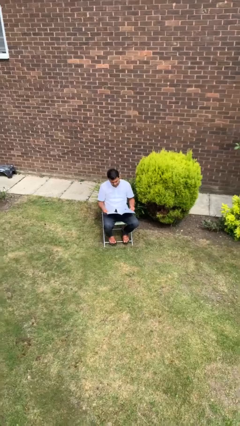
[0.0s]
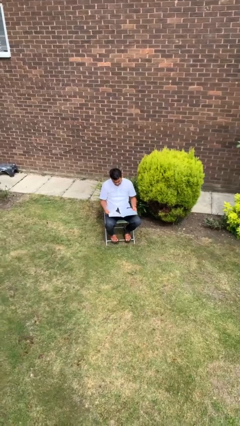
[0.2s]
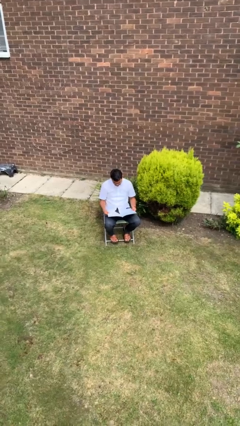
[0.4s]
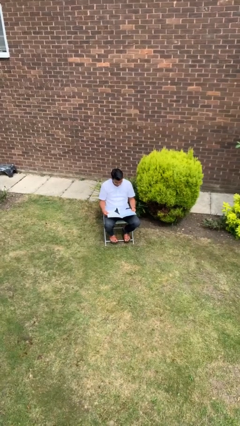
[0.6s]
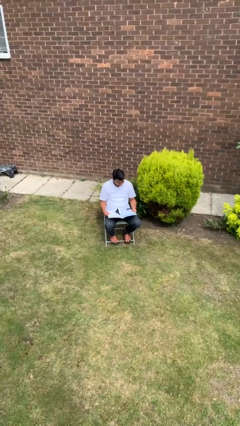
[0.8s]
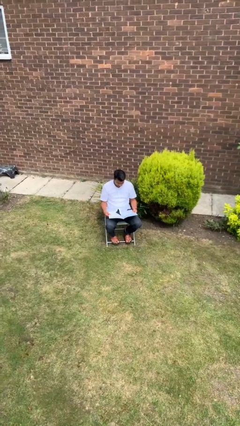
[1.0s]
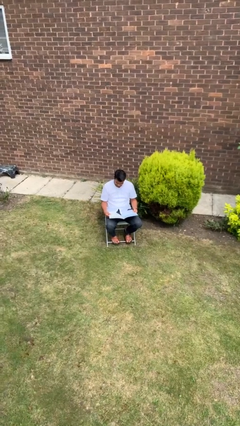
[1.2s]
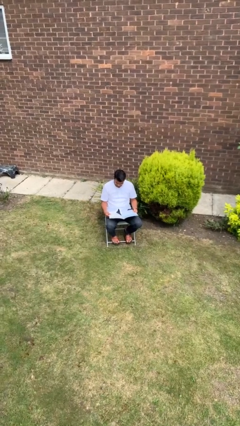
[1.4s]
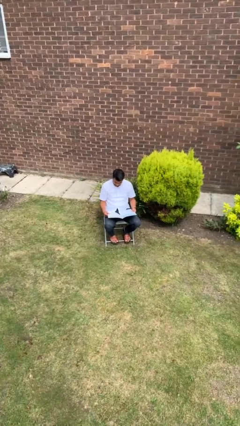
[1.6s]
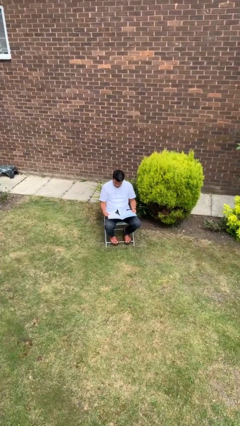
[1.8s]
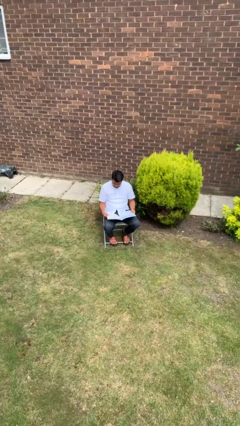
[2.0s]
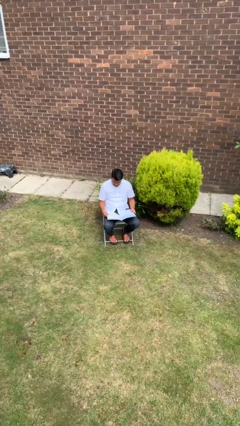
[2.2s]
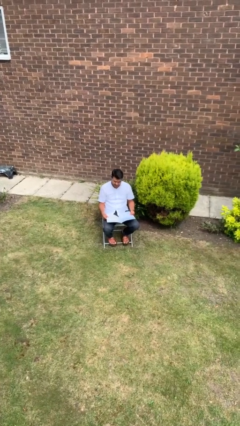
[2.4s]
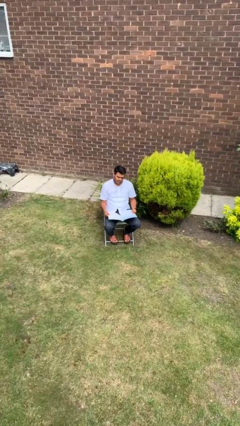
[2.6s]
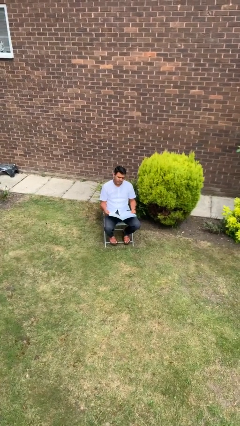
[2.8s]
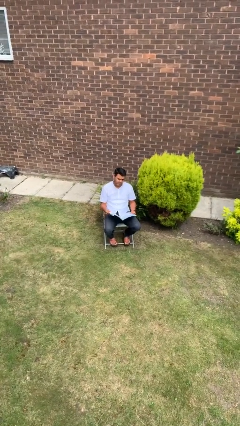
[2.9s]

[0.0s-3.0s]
person reads magazine

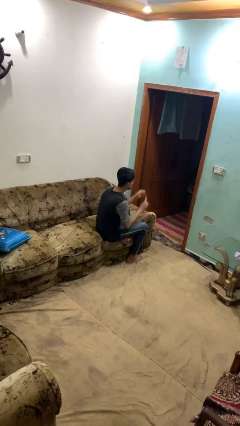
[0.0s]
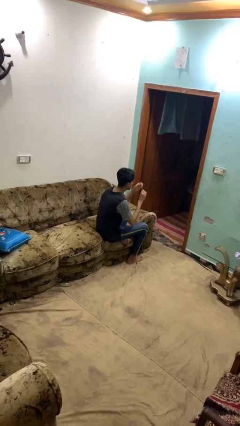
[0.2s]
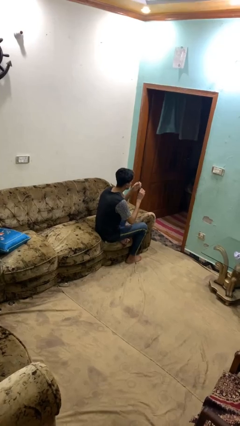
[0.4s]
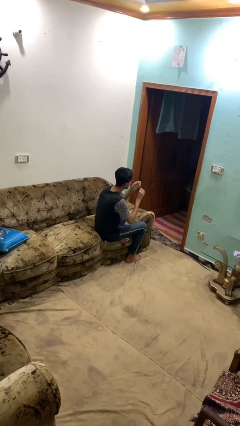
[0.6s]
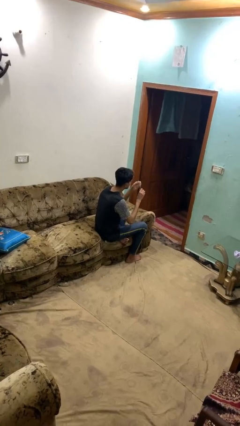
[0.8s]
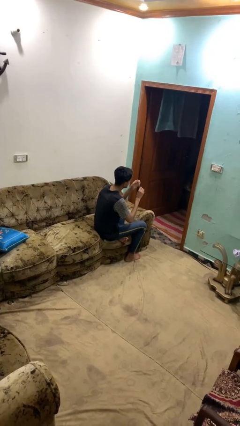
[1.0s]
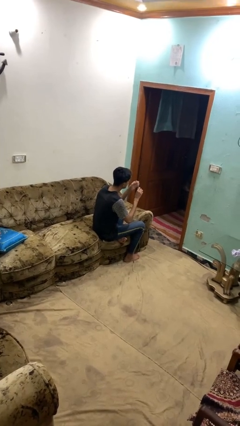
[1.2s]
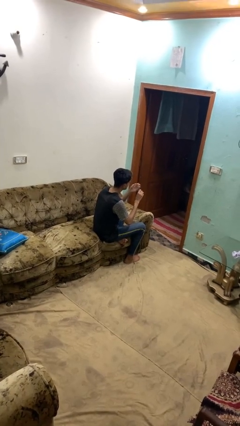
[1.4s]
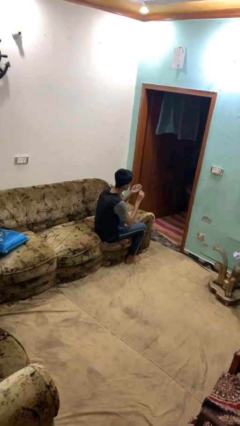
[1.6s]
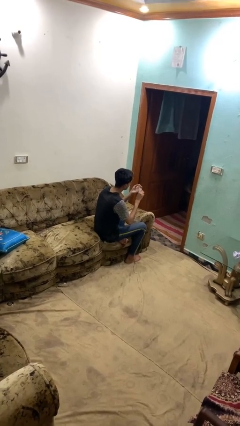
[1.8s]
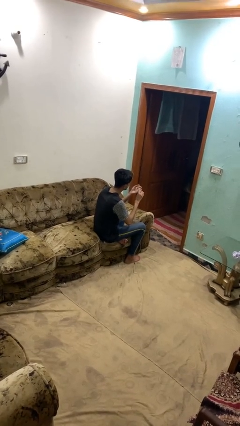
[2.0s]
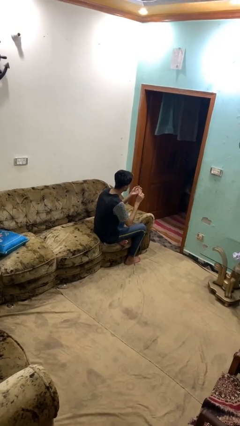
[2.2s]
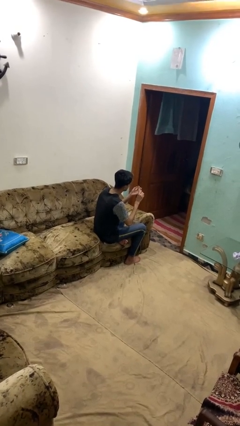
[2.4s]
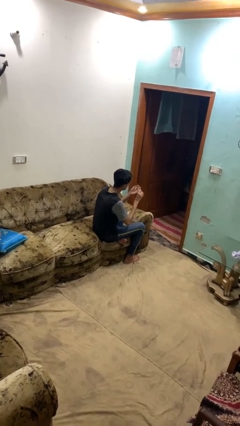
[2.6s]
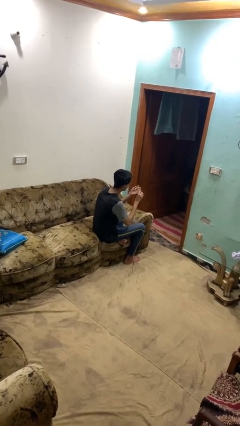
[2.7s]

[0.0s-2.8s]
person files fingernails

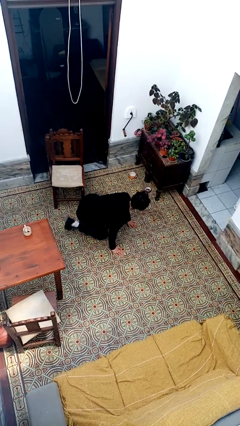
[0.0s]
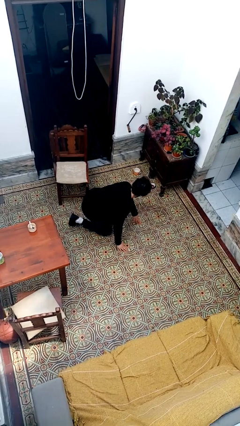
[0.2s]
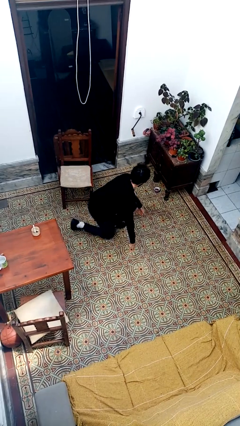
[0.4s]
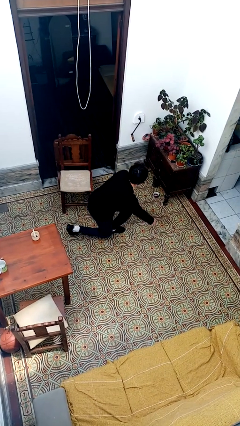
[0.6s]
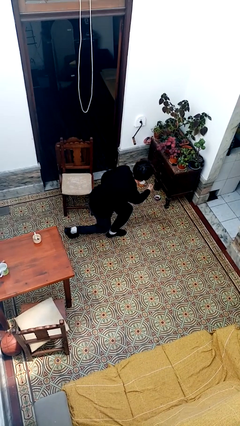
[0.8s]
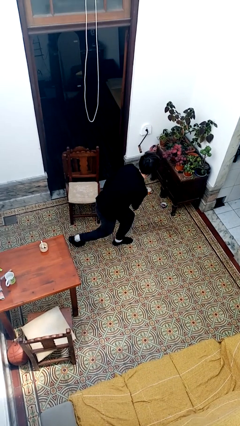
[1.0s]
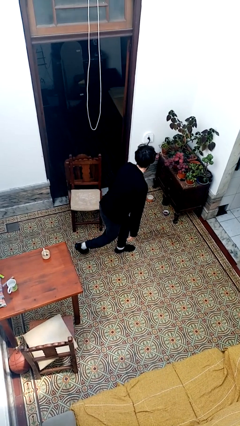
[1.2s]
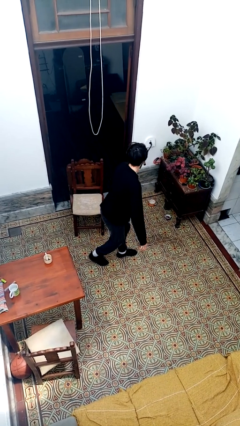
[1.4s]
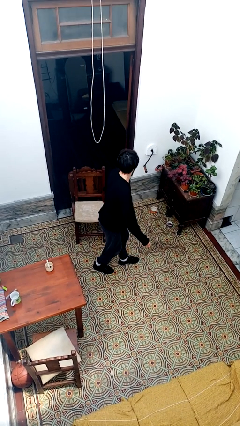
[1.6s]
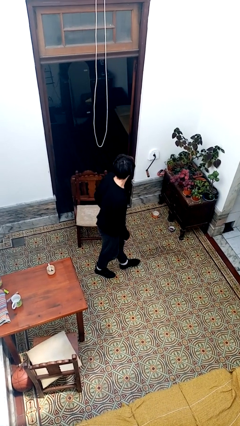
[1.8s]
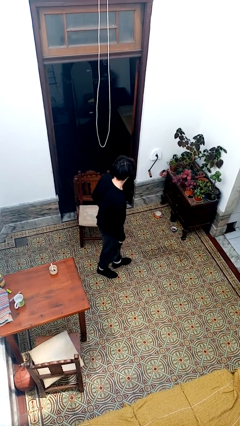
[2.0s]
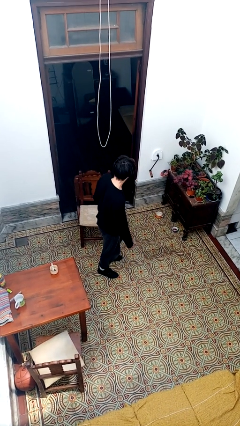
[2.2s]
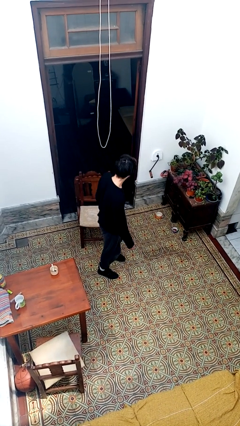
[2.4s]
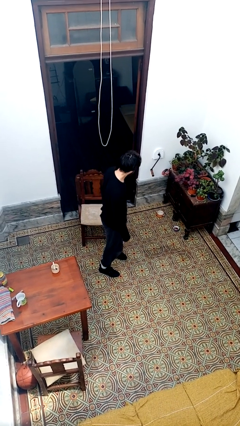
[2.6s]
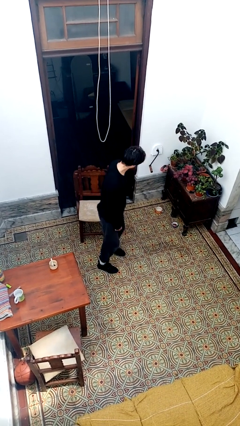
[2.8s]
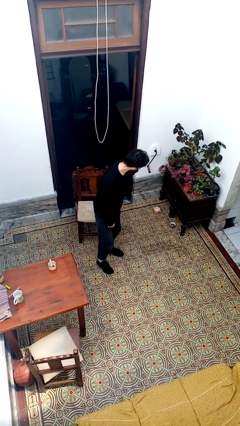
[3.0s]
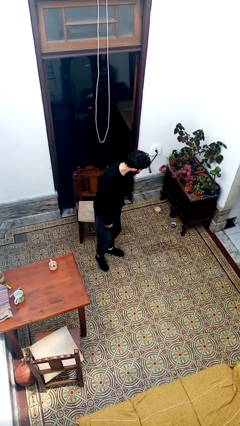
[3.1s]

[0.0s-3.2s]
person stands up from floor

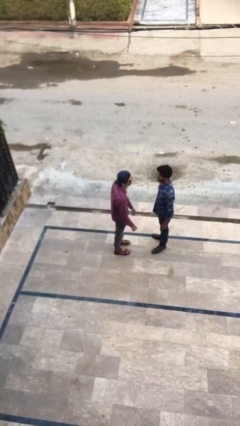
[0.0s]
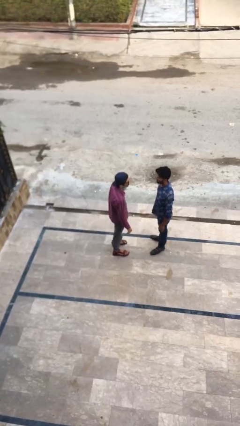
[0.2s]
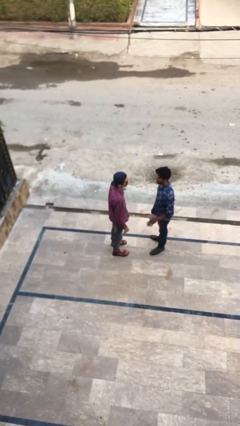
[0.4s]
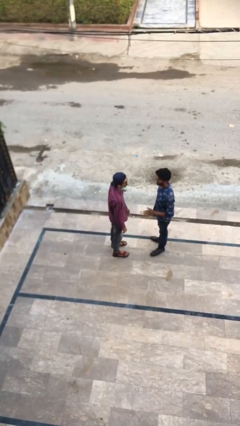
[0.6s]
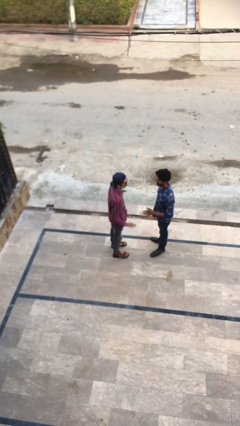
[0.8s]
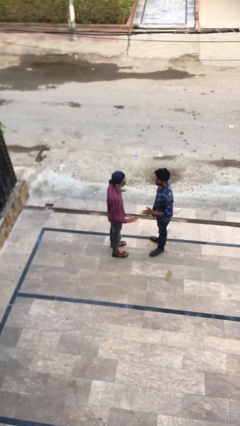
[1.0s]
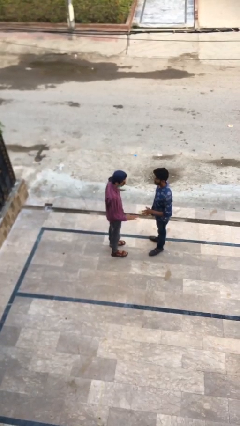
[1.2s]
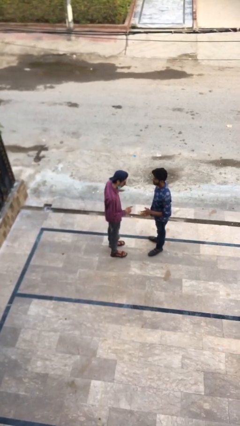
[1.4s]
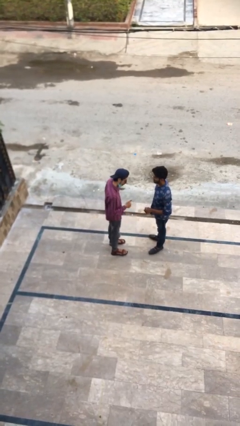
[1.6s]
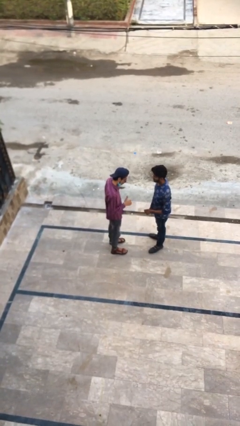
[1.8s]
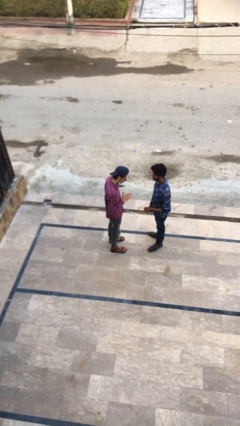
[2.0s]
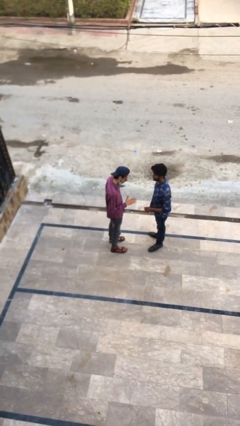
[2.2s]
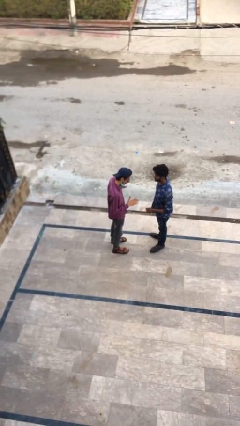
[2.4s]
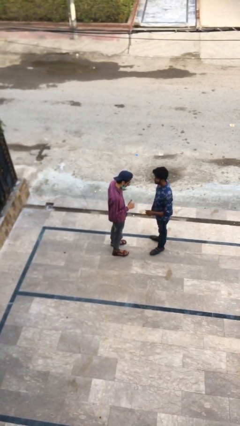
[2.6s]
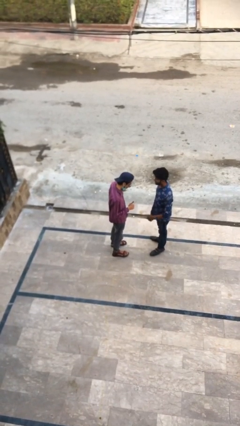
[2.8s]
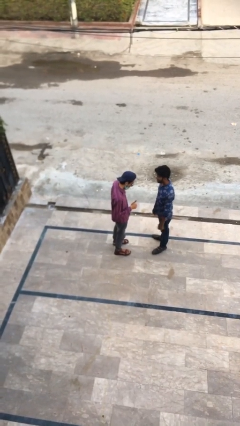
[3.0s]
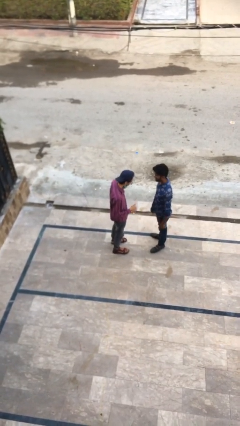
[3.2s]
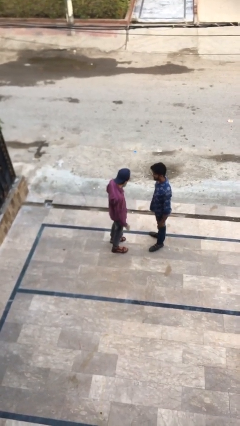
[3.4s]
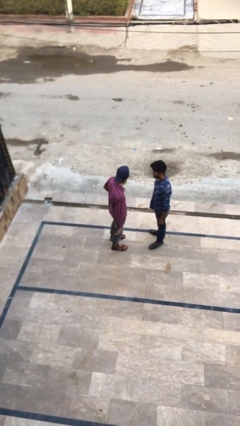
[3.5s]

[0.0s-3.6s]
person talks to person

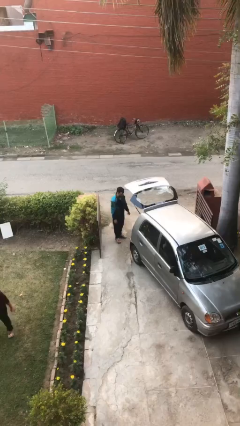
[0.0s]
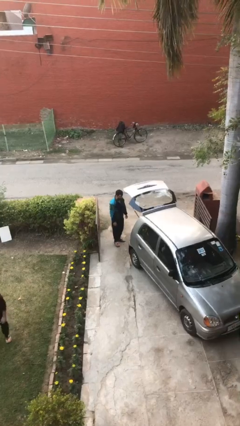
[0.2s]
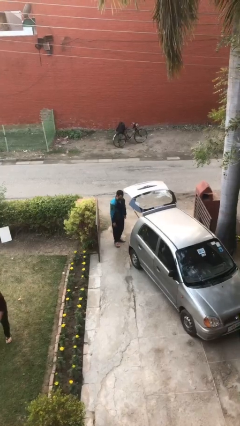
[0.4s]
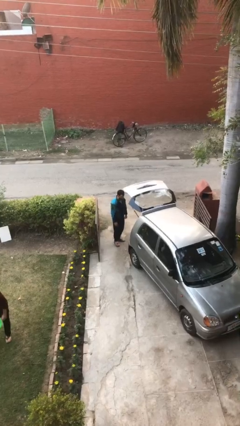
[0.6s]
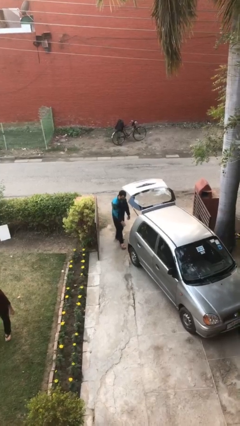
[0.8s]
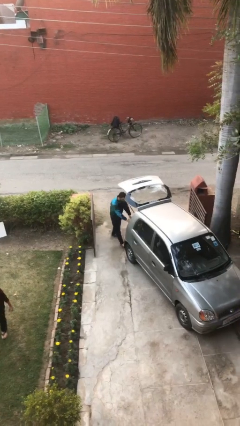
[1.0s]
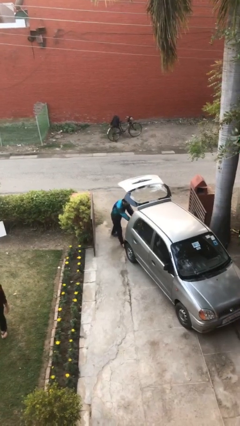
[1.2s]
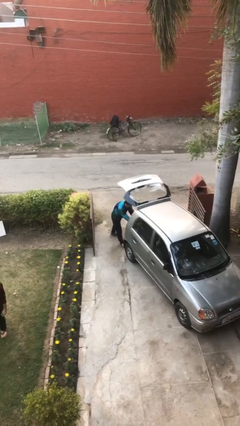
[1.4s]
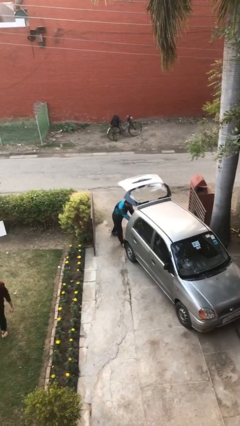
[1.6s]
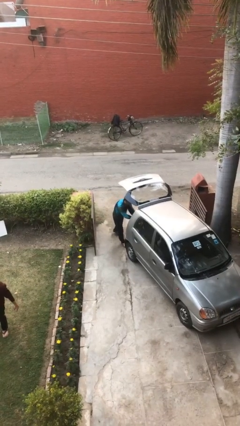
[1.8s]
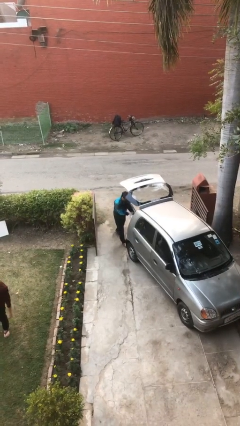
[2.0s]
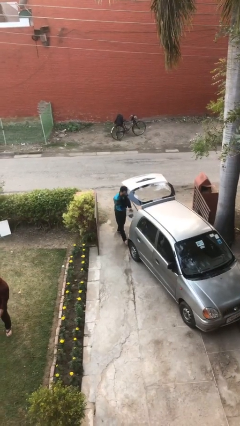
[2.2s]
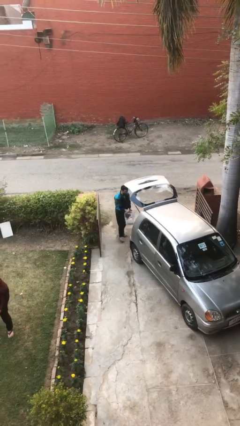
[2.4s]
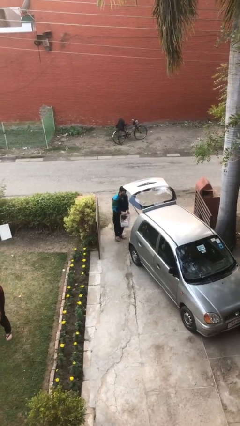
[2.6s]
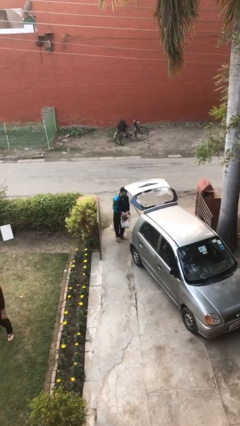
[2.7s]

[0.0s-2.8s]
person unloads car

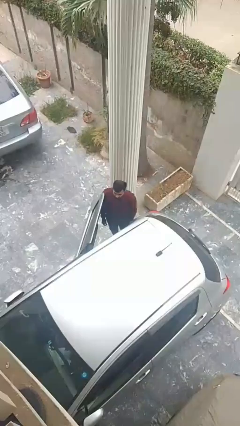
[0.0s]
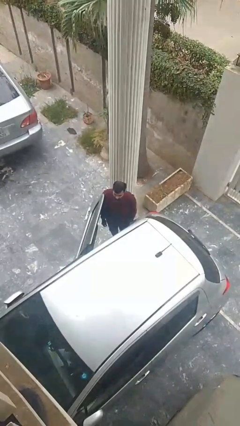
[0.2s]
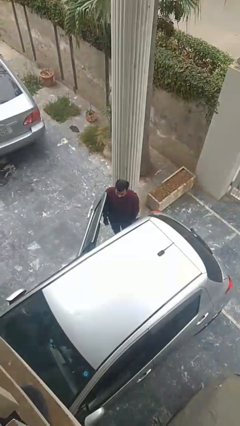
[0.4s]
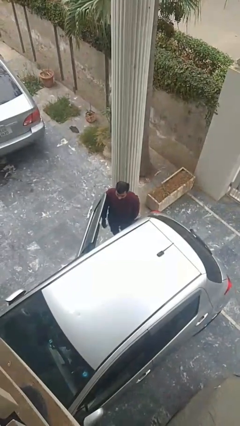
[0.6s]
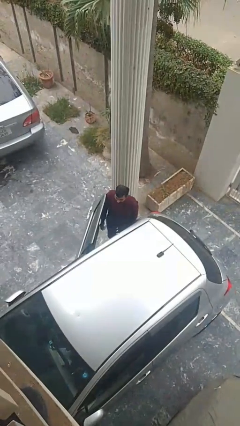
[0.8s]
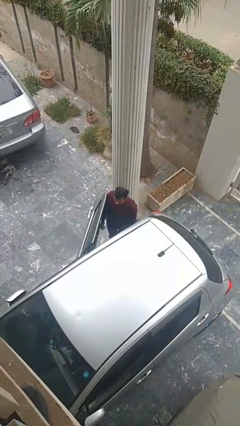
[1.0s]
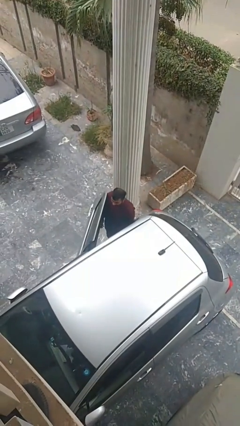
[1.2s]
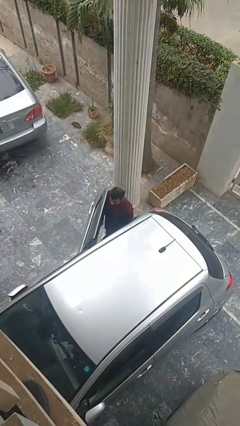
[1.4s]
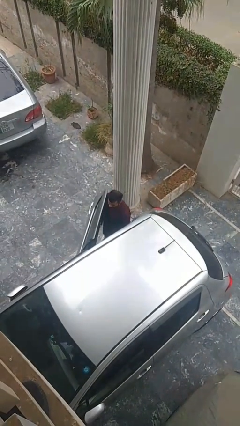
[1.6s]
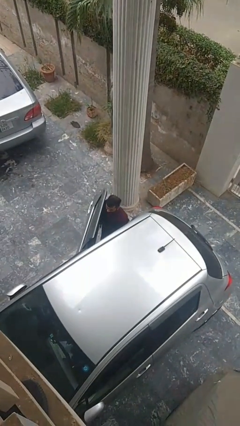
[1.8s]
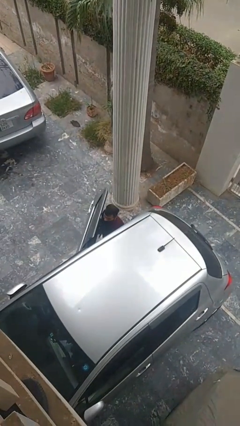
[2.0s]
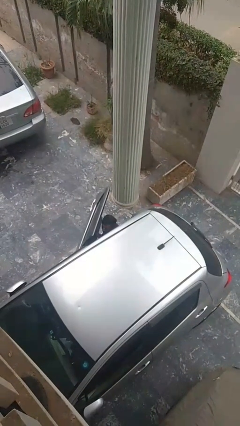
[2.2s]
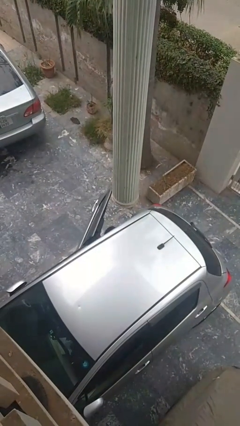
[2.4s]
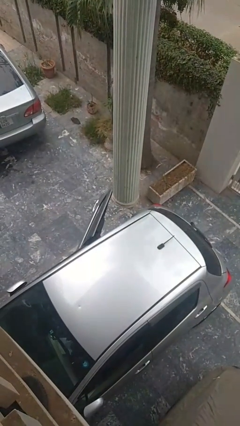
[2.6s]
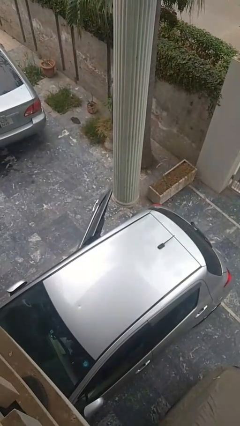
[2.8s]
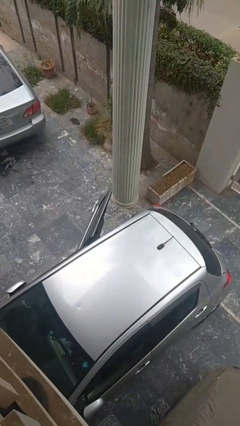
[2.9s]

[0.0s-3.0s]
person enters car
